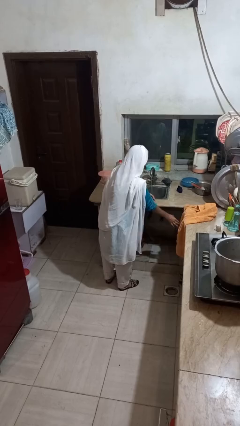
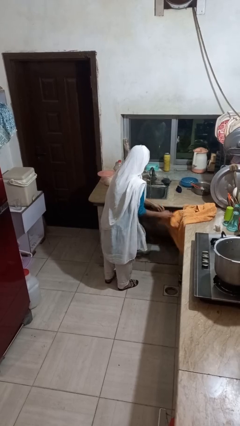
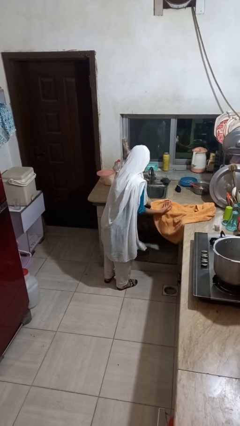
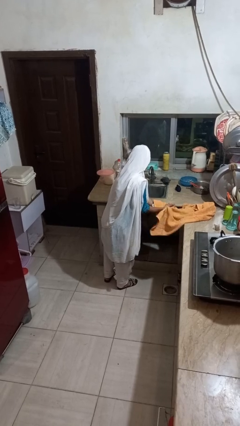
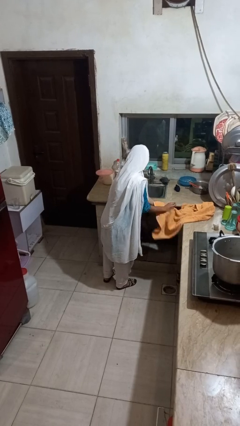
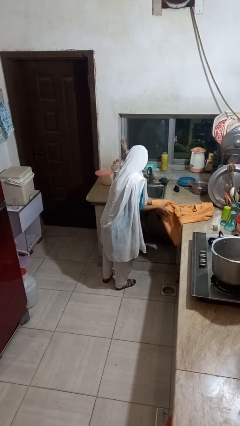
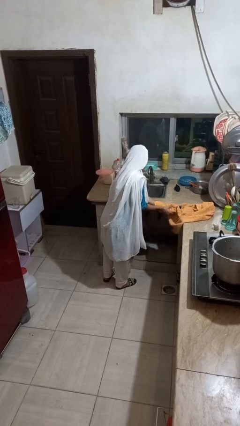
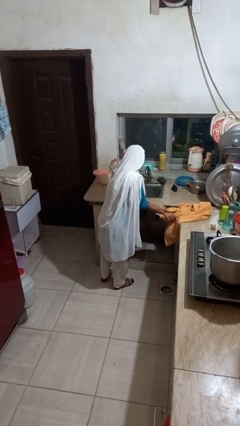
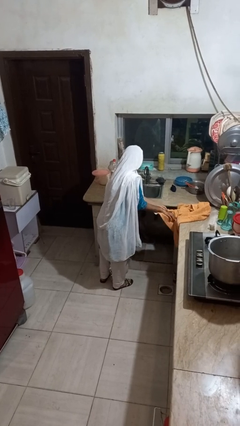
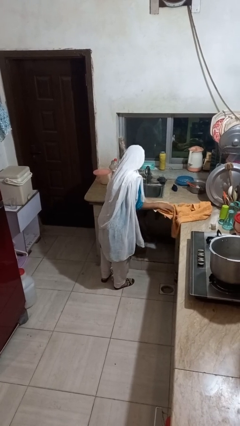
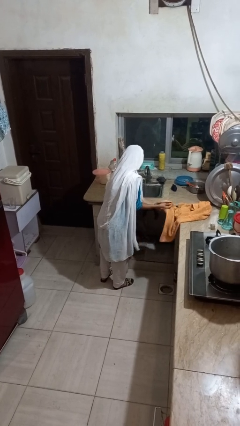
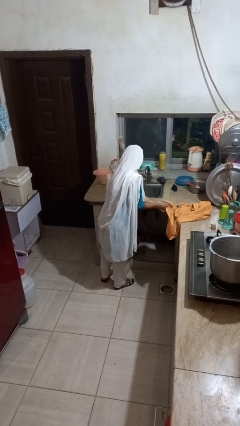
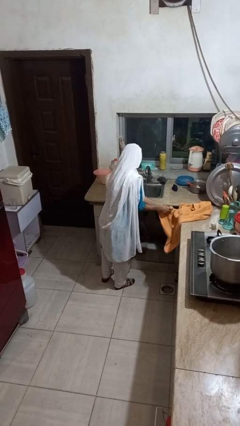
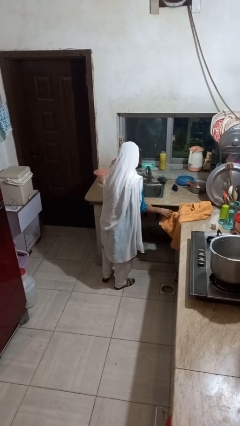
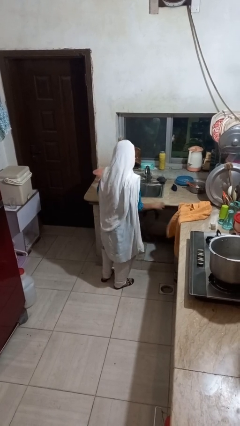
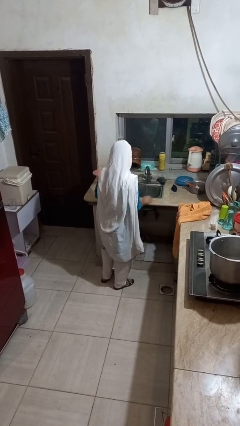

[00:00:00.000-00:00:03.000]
person washes hands

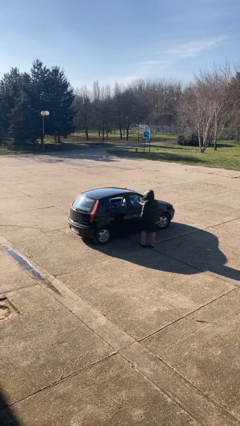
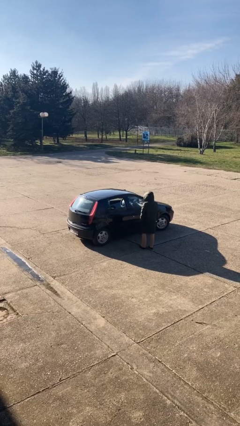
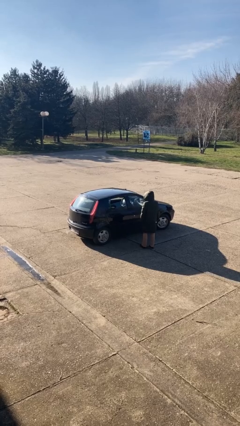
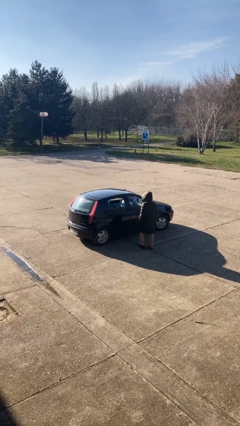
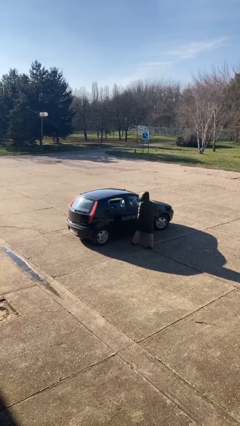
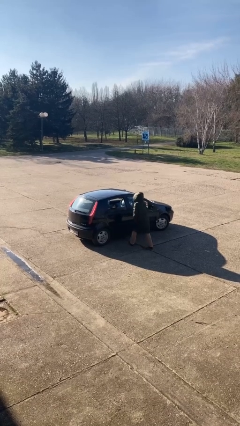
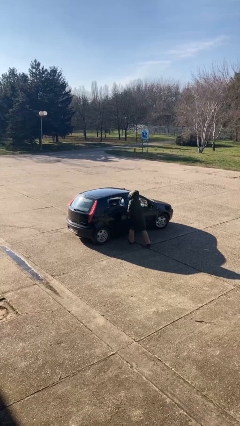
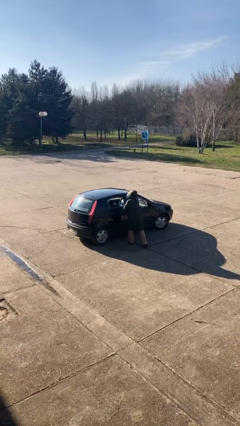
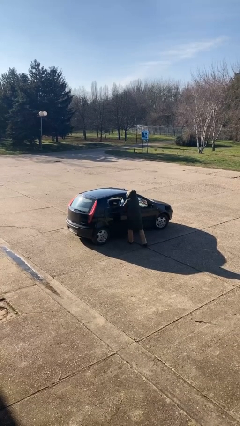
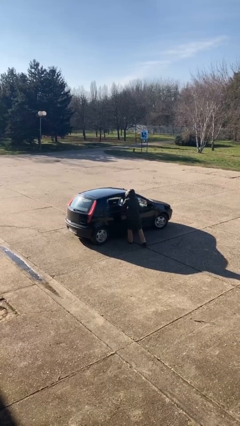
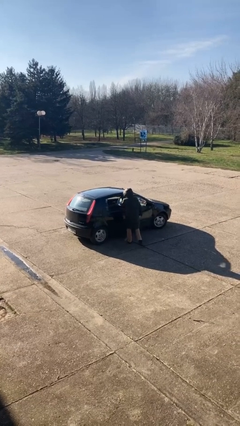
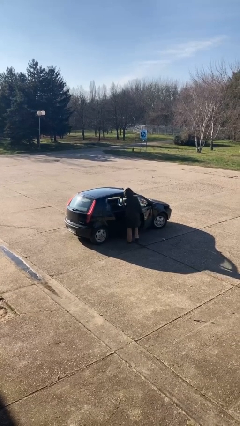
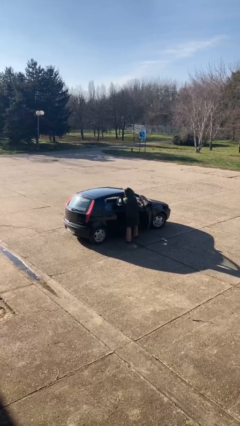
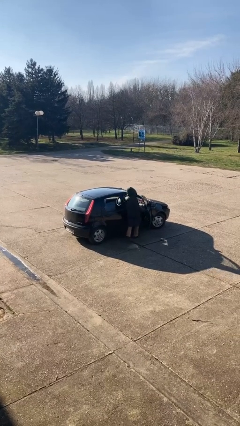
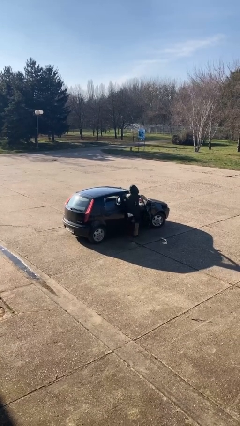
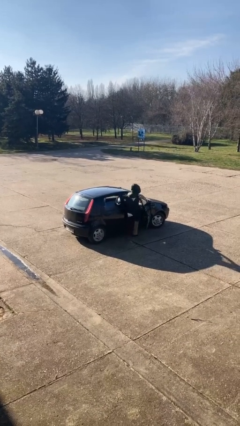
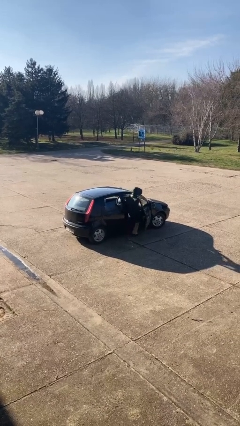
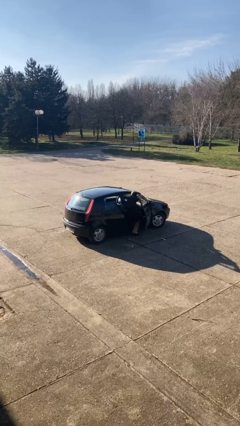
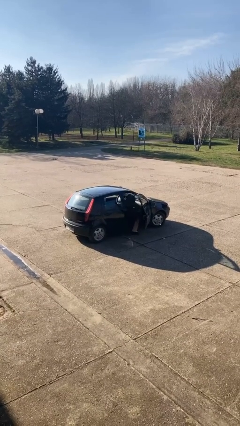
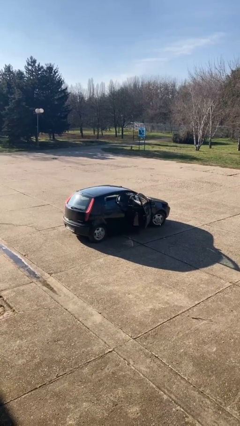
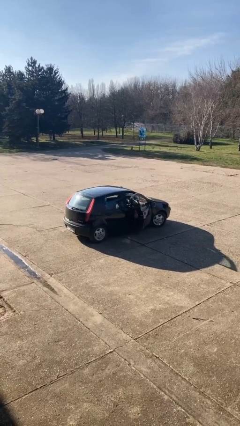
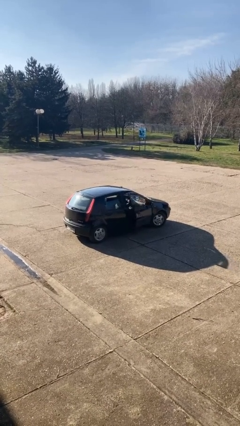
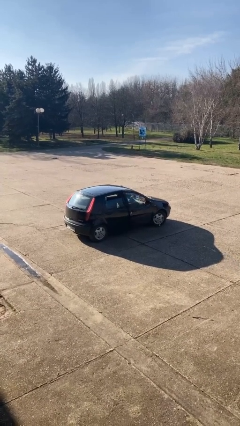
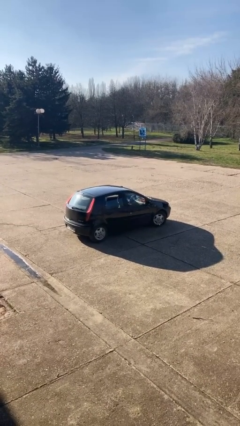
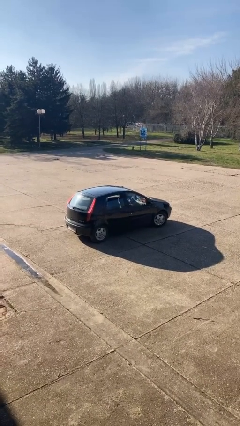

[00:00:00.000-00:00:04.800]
car picks up person

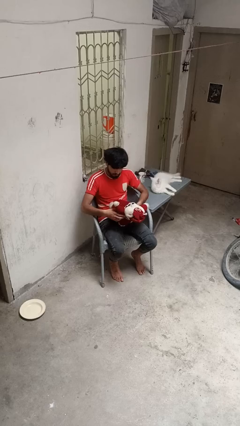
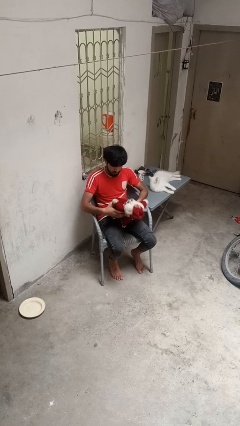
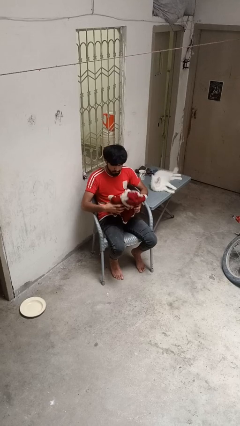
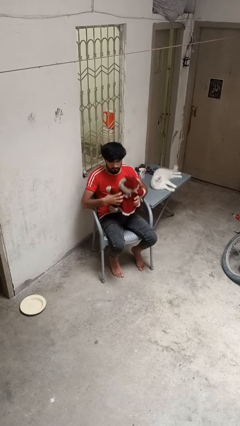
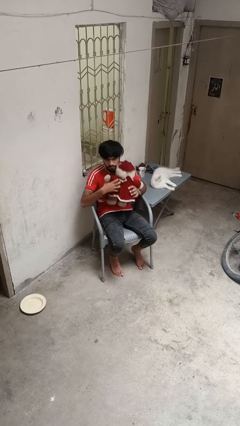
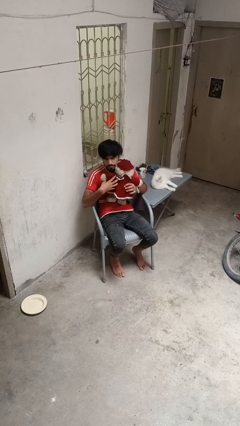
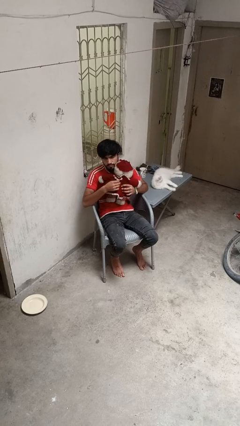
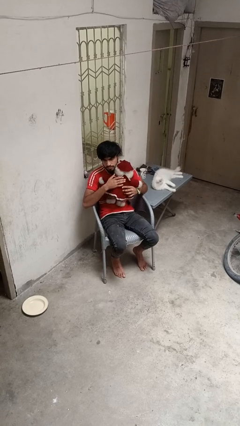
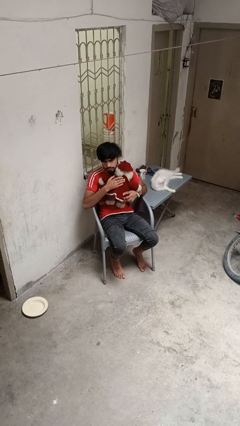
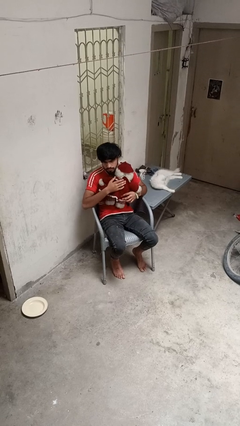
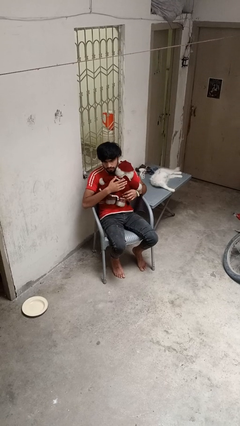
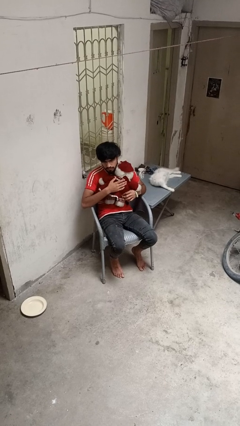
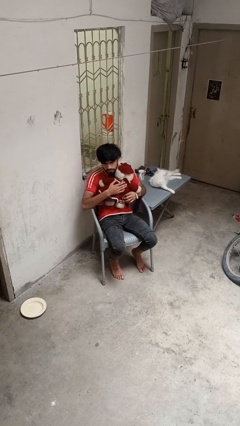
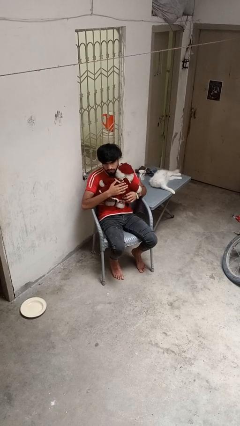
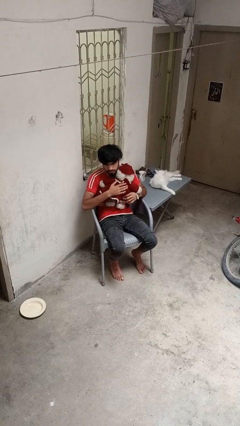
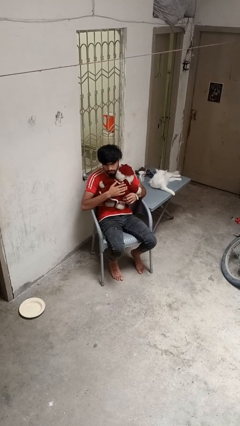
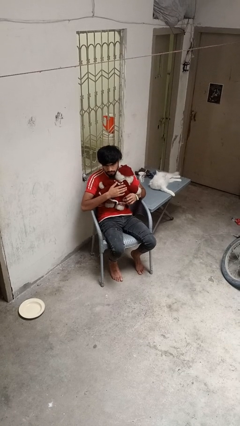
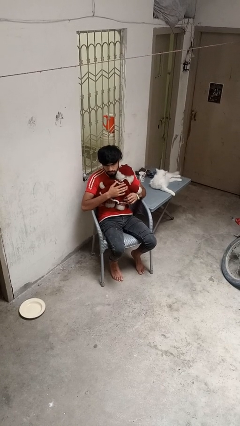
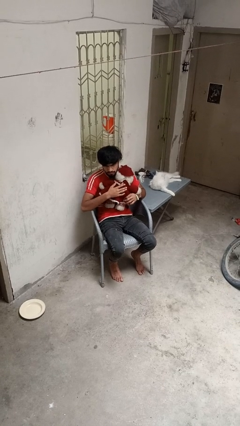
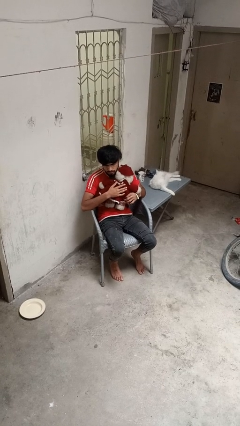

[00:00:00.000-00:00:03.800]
person hugs stuffed animal

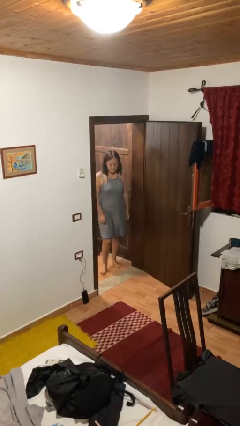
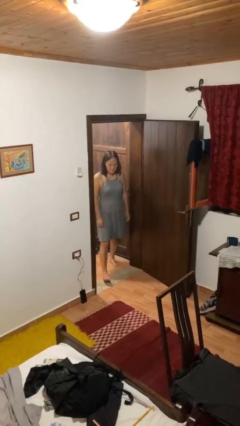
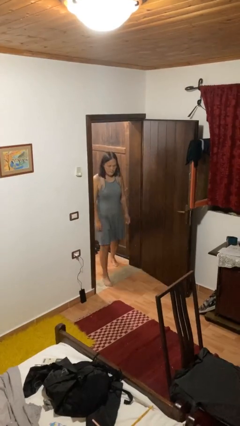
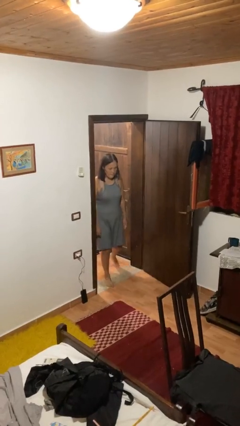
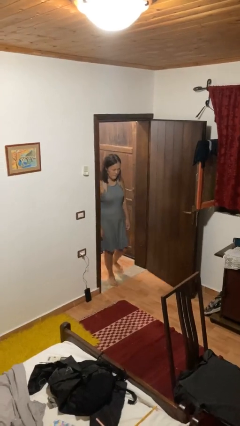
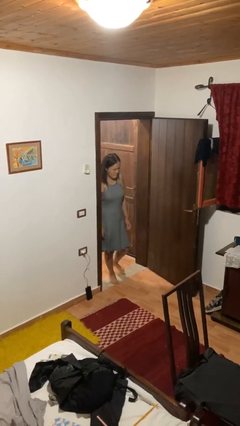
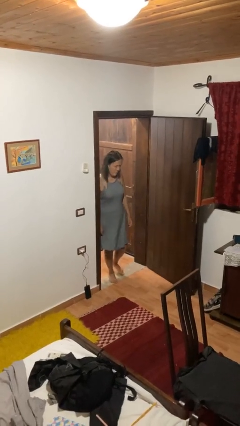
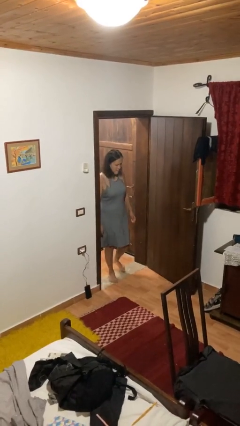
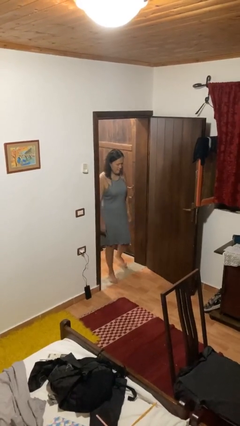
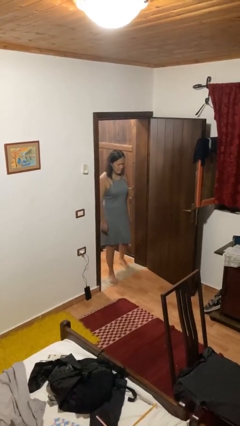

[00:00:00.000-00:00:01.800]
person bumps into wall

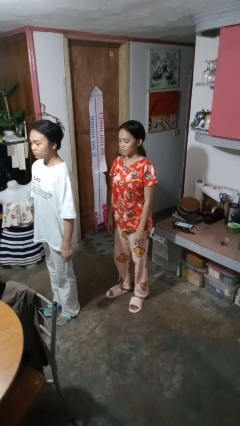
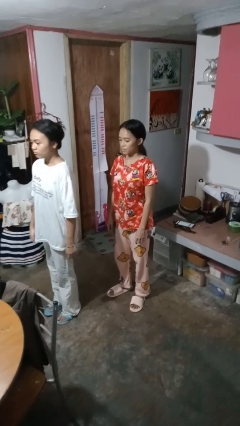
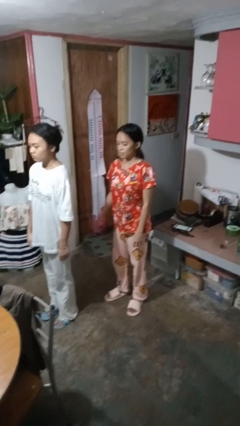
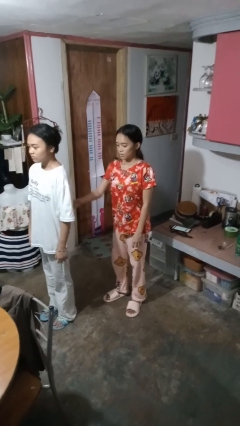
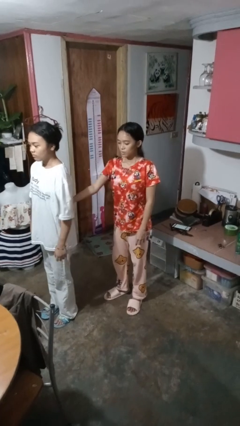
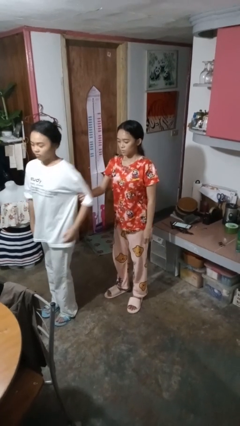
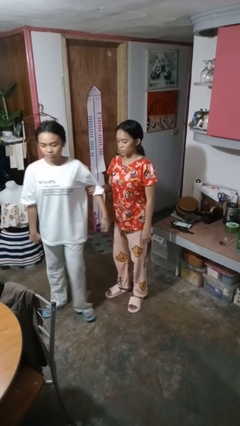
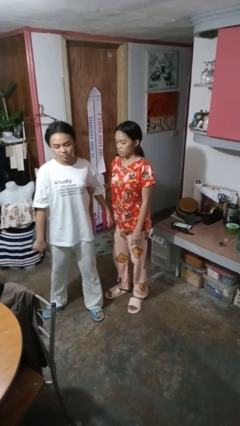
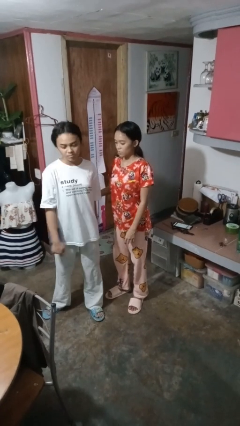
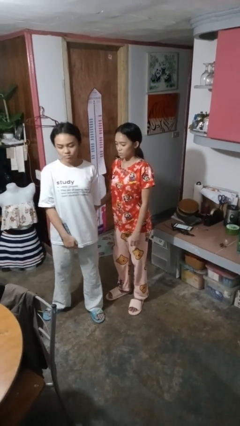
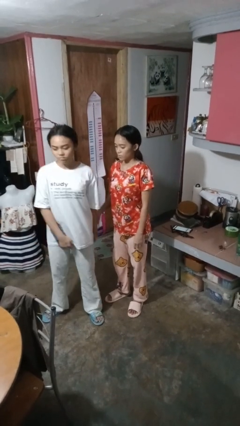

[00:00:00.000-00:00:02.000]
person grabs person by bicep

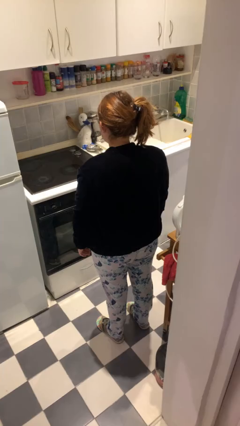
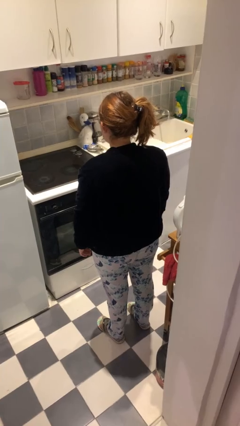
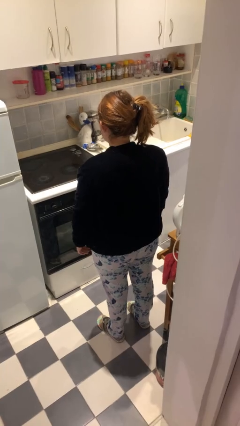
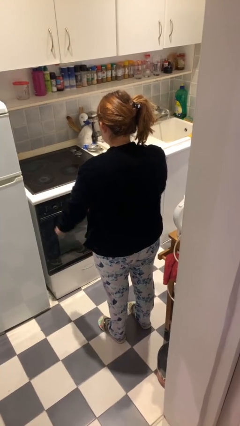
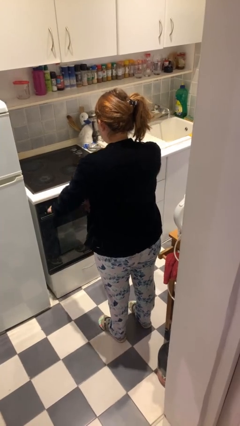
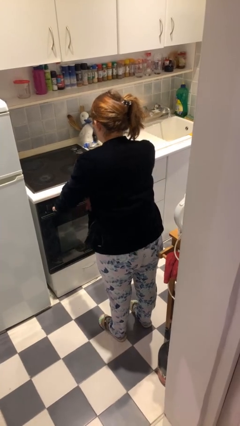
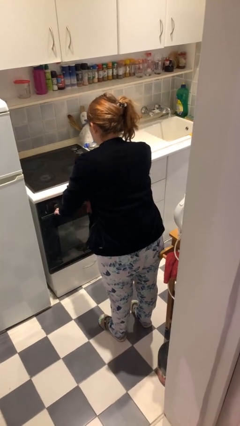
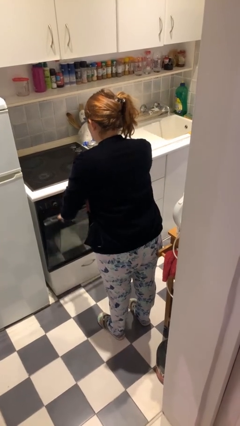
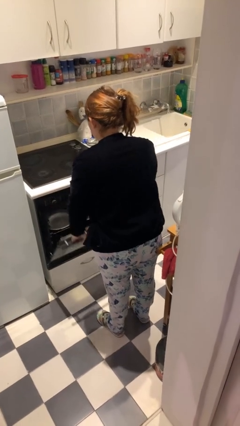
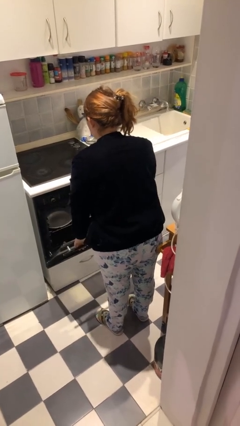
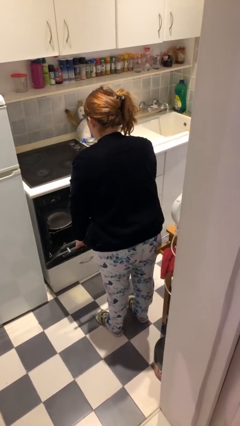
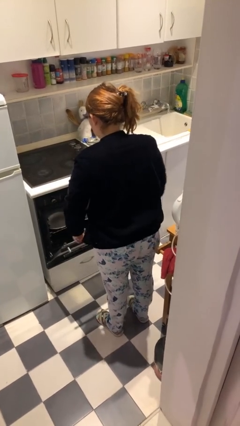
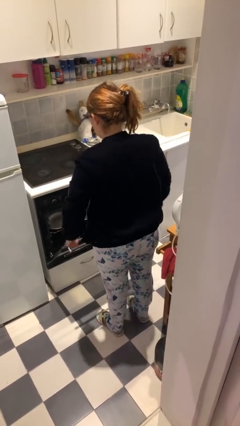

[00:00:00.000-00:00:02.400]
person opens dishwasher
